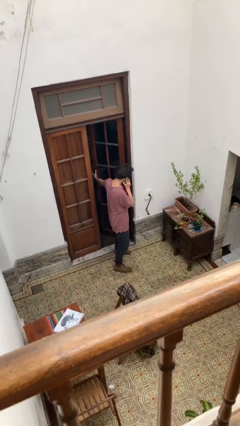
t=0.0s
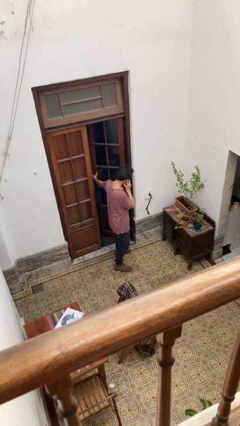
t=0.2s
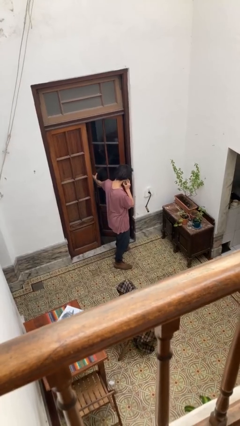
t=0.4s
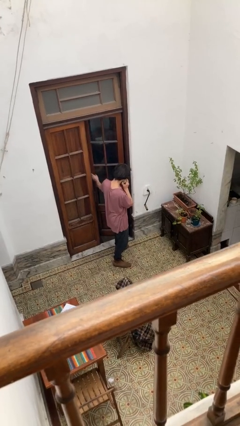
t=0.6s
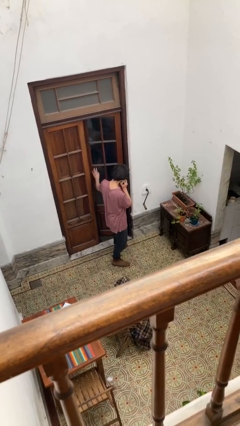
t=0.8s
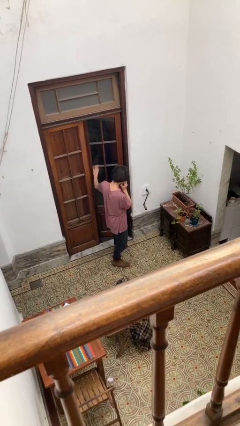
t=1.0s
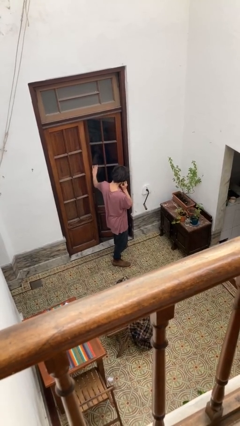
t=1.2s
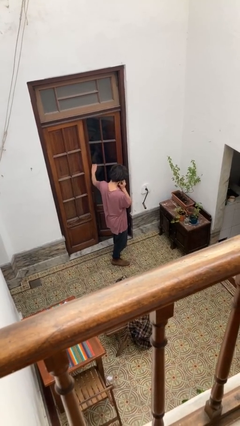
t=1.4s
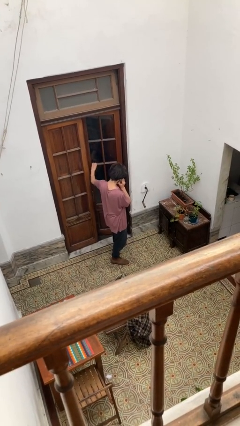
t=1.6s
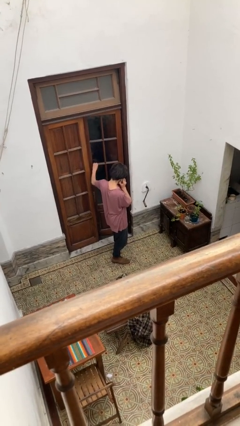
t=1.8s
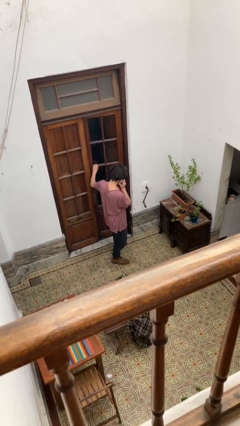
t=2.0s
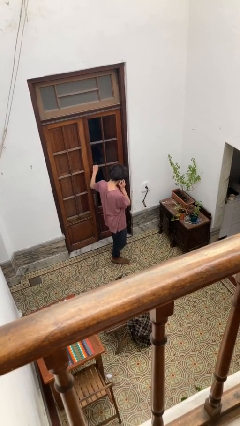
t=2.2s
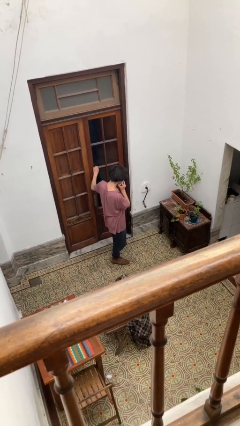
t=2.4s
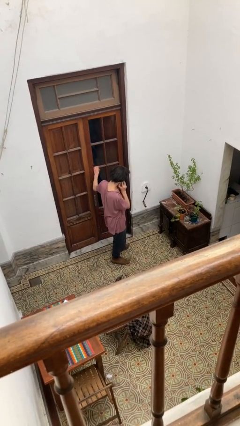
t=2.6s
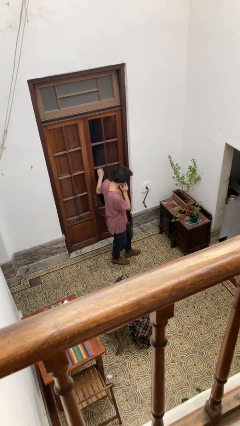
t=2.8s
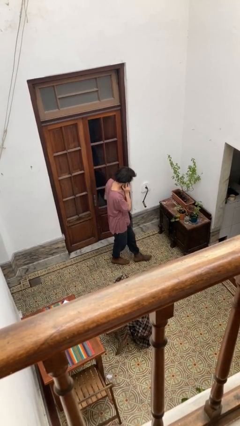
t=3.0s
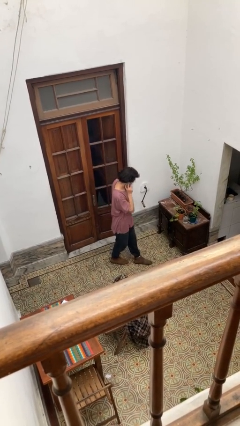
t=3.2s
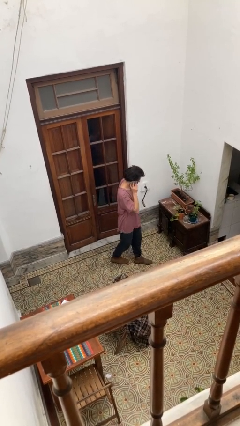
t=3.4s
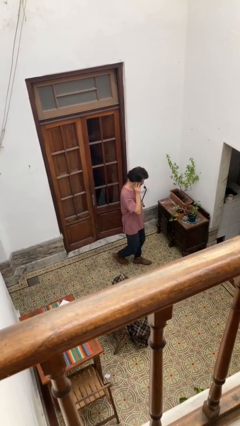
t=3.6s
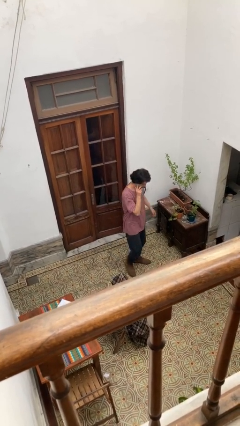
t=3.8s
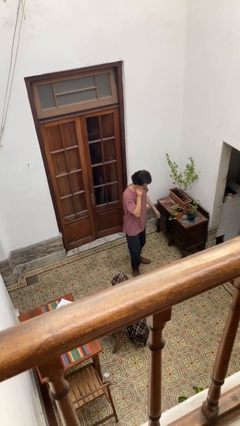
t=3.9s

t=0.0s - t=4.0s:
person closes facility door

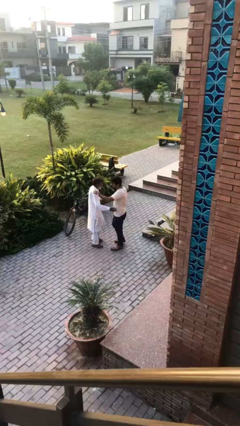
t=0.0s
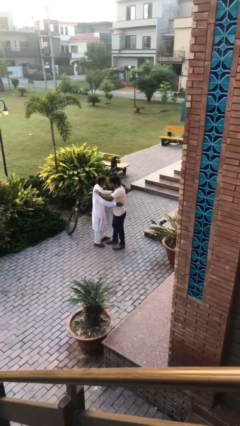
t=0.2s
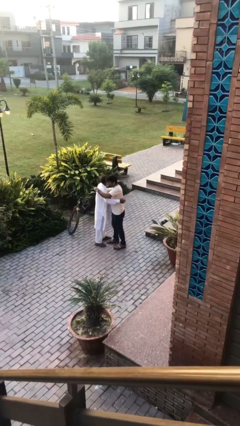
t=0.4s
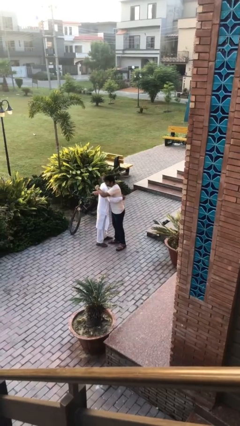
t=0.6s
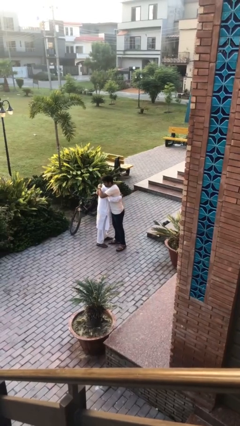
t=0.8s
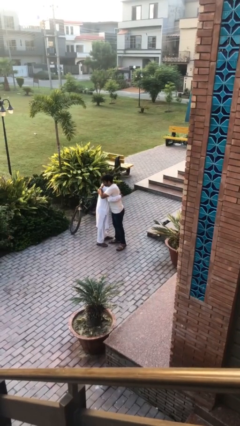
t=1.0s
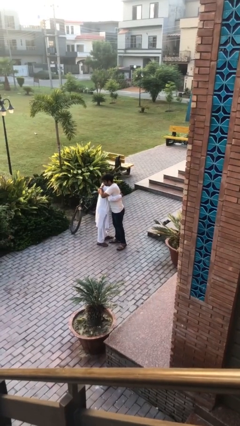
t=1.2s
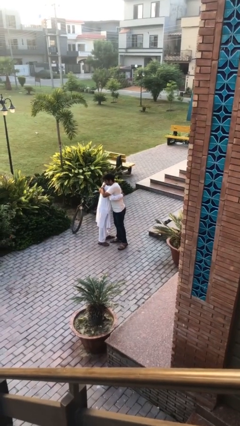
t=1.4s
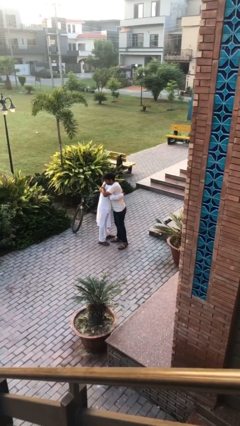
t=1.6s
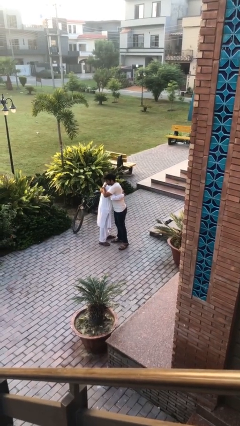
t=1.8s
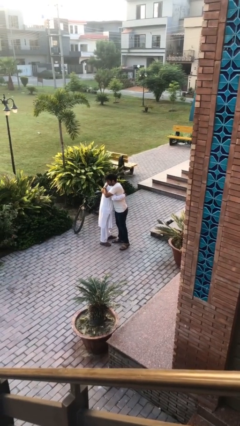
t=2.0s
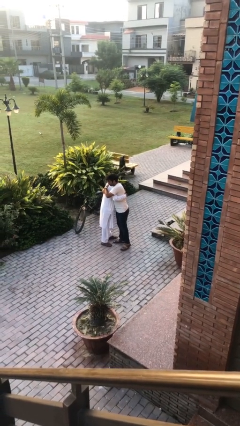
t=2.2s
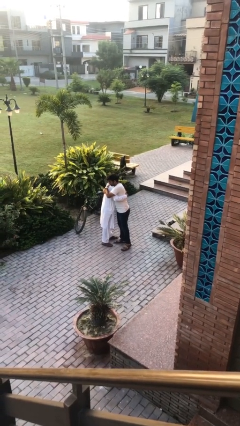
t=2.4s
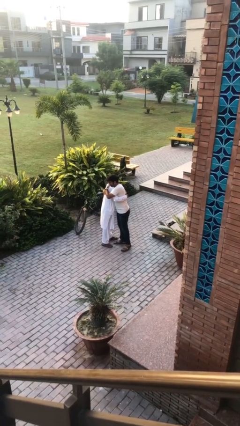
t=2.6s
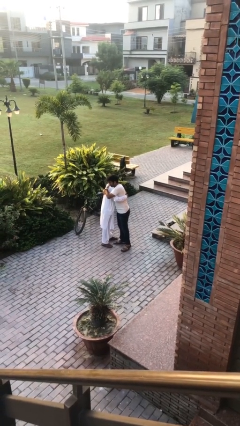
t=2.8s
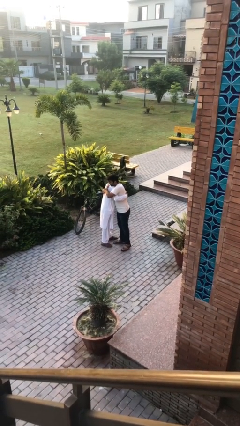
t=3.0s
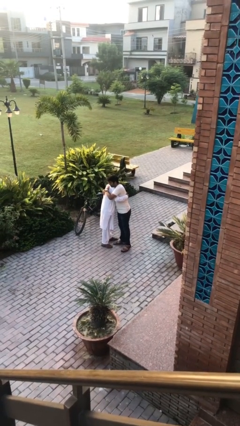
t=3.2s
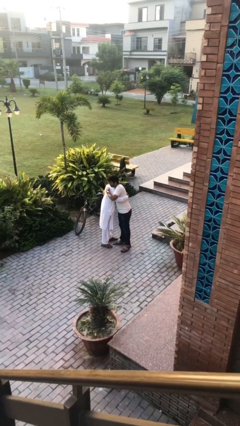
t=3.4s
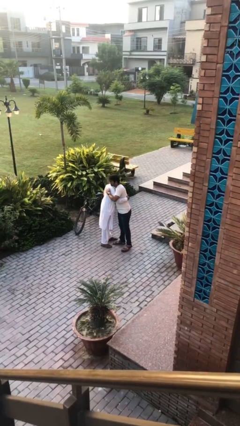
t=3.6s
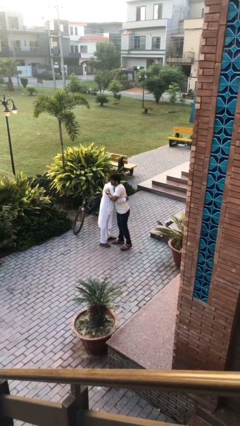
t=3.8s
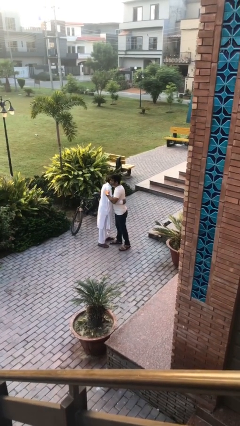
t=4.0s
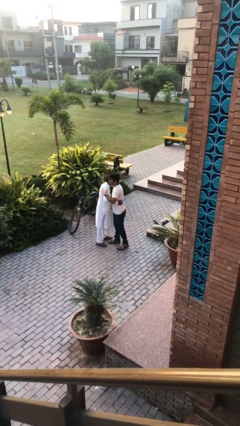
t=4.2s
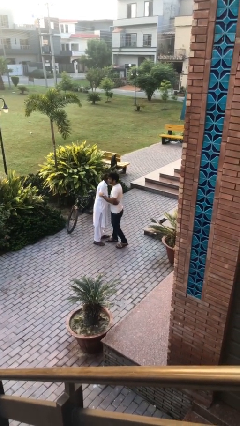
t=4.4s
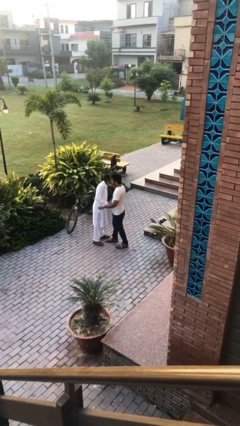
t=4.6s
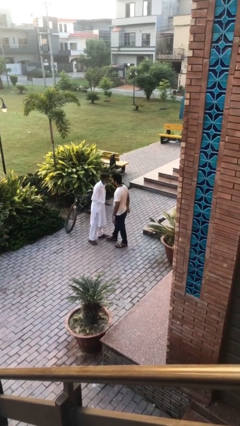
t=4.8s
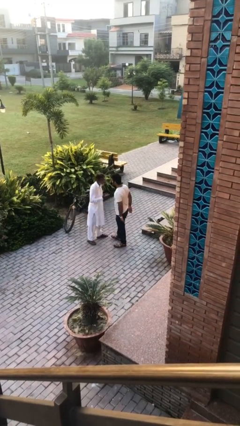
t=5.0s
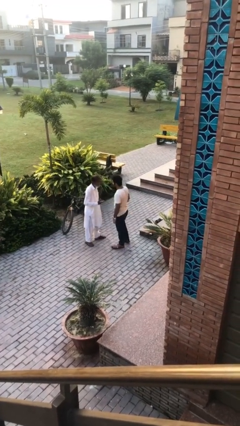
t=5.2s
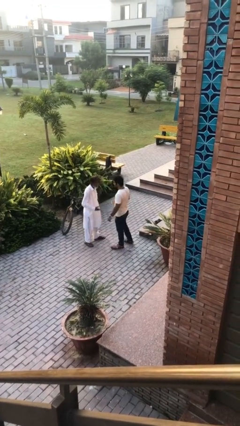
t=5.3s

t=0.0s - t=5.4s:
person embraces person

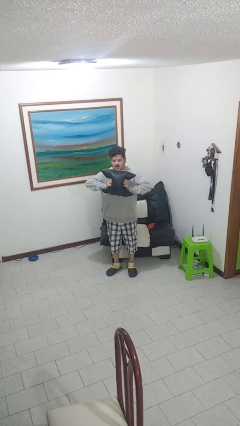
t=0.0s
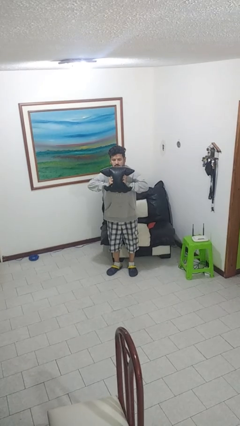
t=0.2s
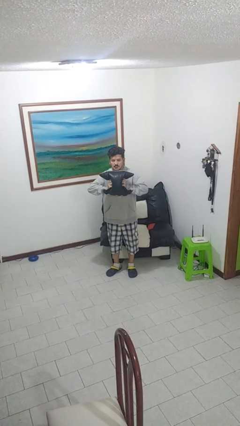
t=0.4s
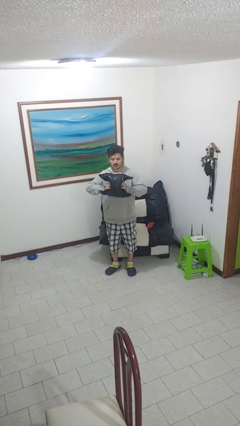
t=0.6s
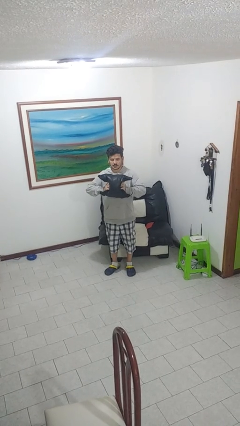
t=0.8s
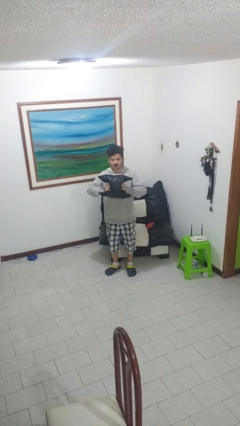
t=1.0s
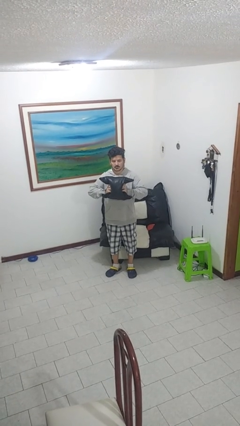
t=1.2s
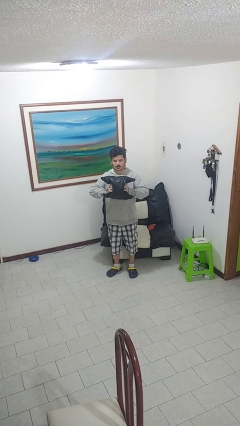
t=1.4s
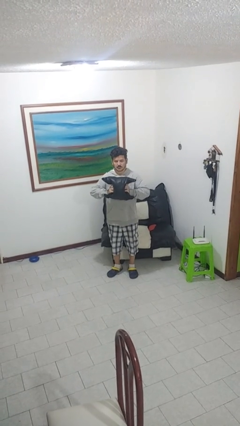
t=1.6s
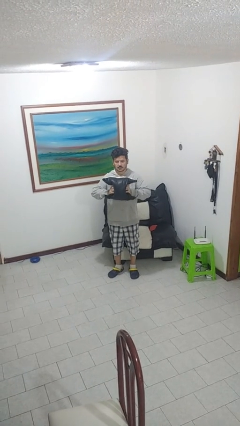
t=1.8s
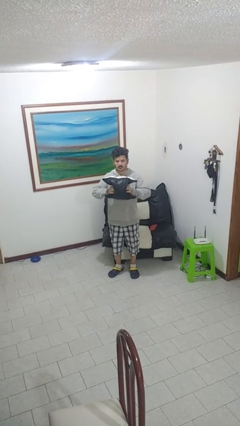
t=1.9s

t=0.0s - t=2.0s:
person squeezes object

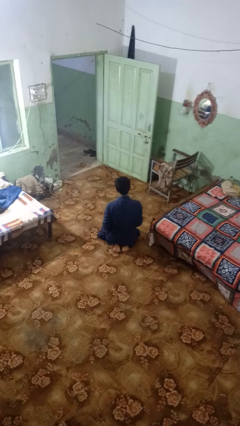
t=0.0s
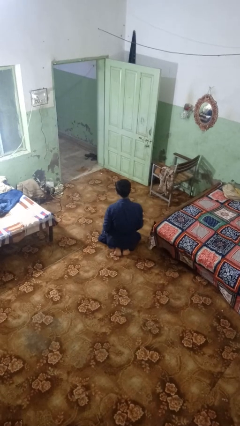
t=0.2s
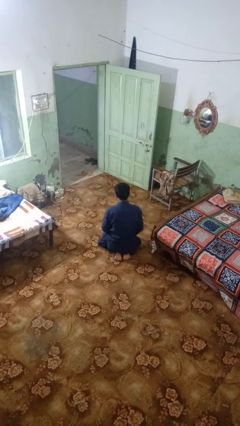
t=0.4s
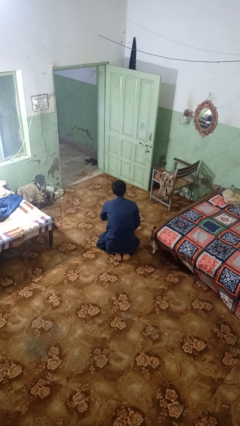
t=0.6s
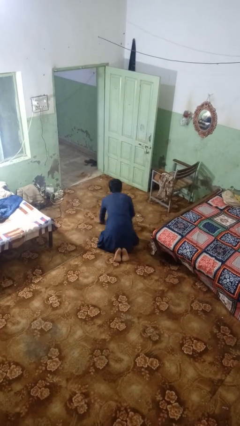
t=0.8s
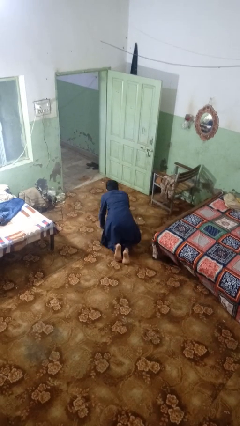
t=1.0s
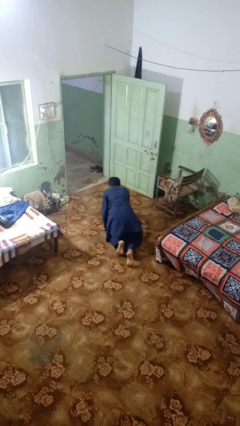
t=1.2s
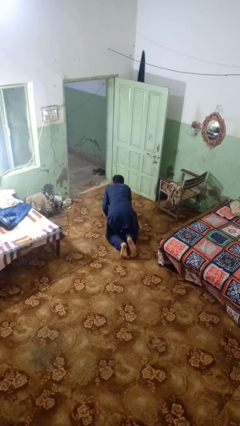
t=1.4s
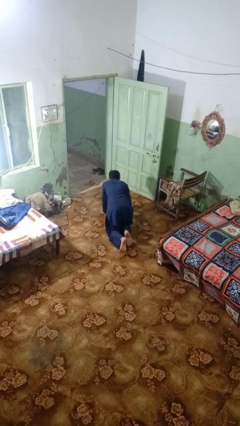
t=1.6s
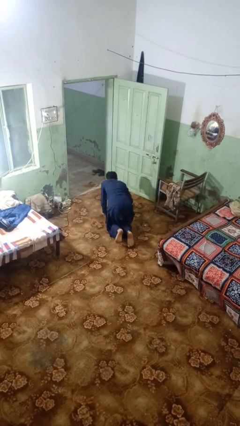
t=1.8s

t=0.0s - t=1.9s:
person crawls

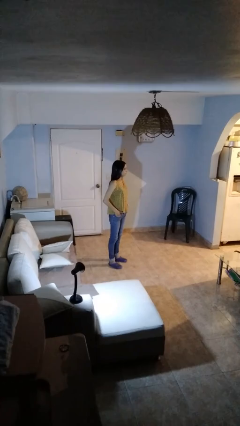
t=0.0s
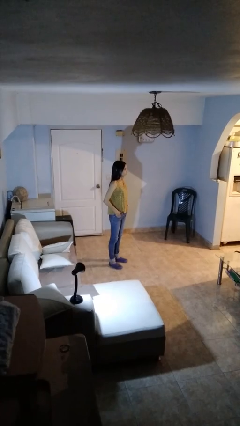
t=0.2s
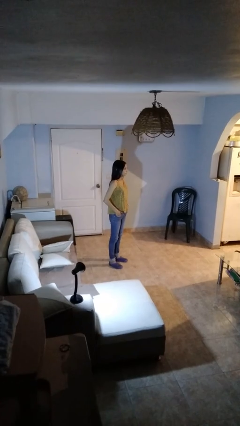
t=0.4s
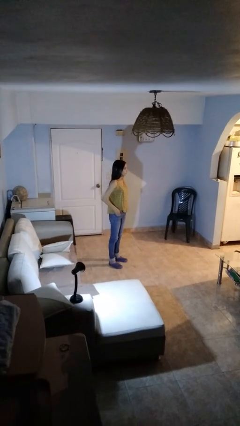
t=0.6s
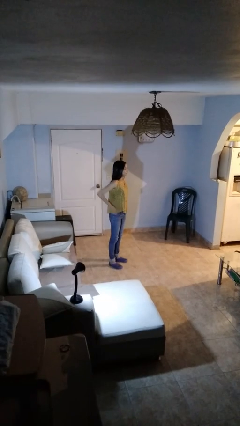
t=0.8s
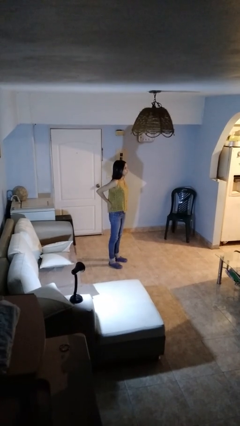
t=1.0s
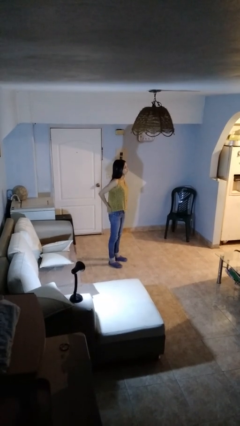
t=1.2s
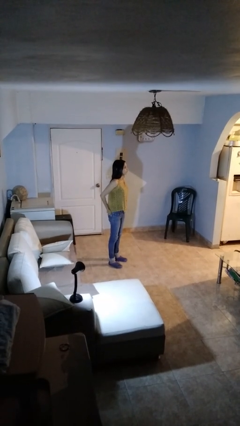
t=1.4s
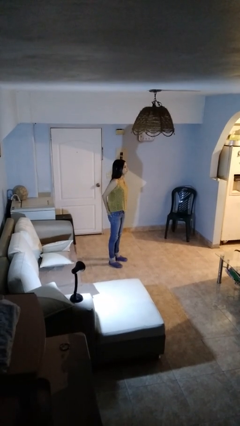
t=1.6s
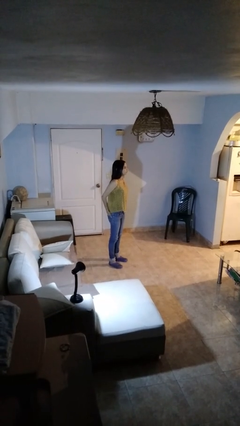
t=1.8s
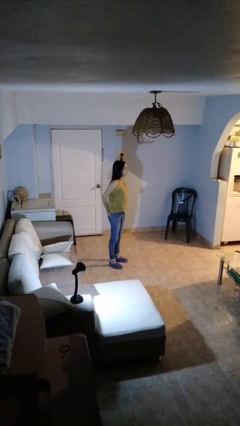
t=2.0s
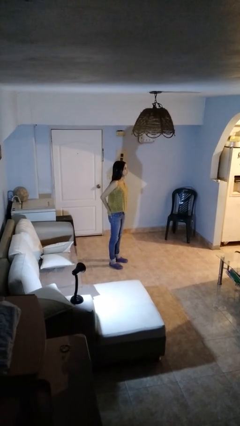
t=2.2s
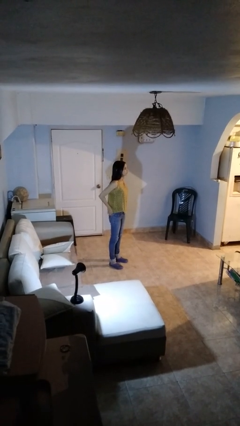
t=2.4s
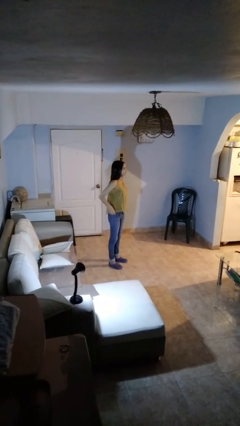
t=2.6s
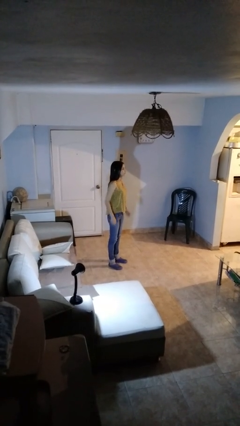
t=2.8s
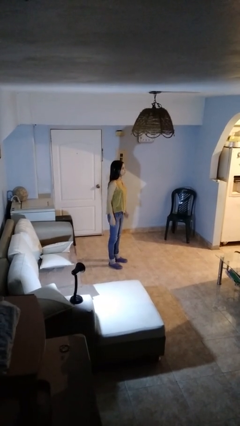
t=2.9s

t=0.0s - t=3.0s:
person puts hands in back pockets

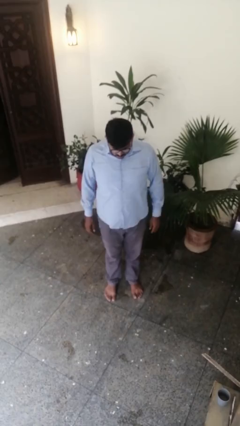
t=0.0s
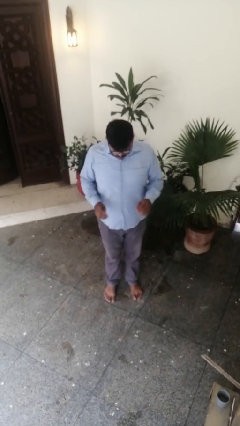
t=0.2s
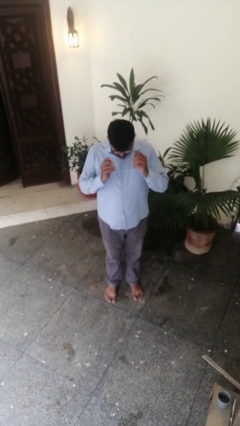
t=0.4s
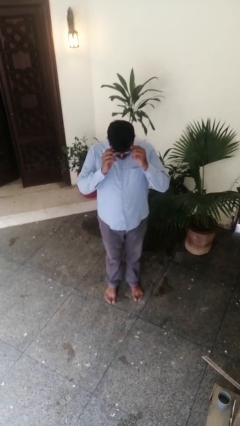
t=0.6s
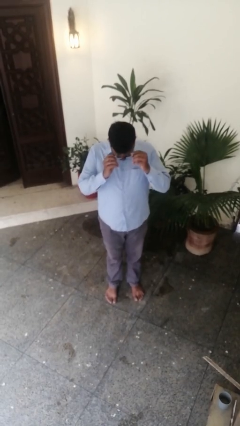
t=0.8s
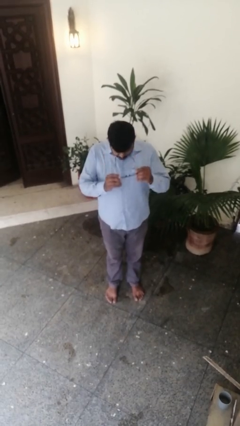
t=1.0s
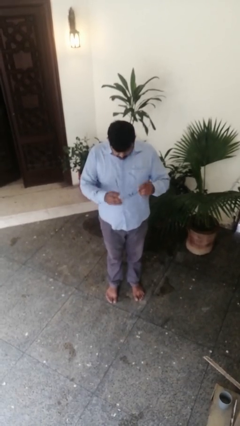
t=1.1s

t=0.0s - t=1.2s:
person takes off glasses

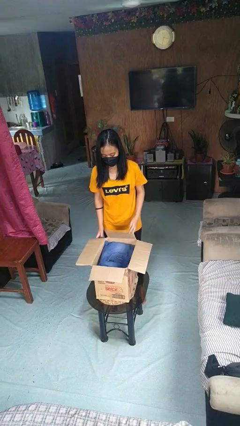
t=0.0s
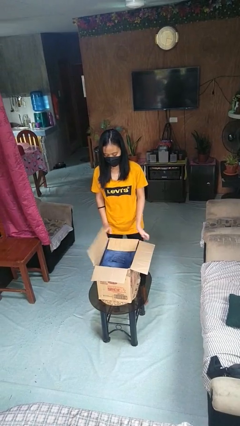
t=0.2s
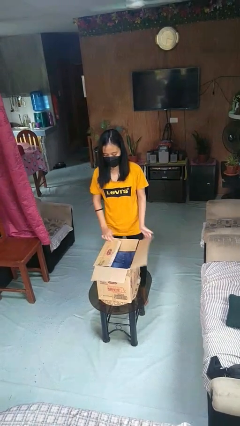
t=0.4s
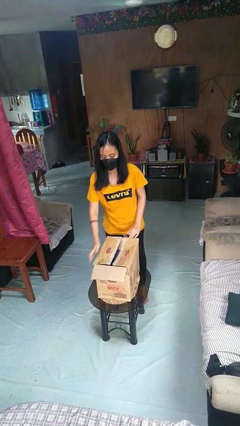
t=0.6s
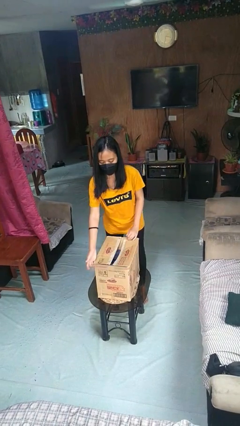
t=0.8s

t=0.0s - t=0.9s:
person closes box
